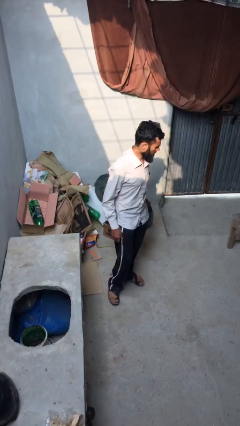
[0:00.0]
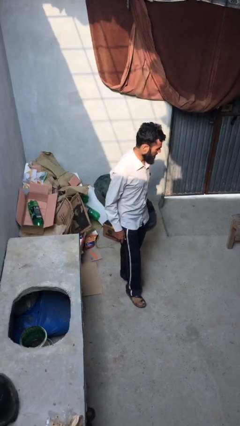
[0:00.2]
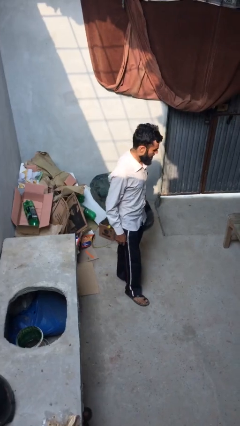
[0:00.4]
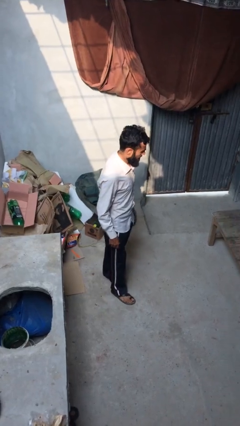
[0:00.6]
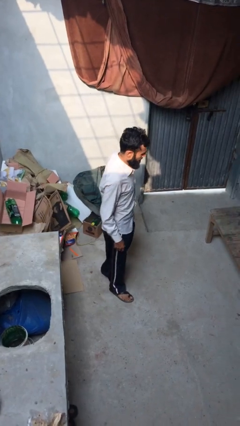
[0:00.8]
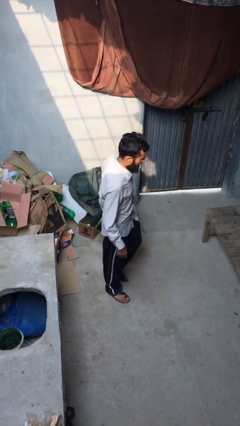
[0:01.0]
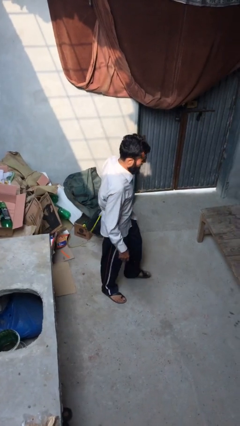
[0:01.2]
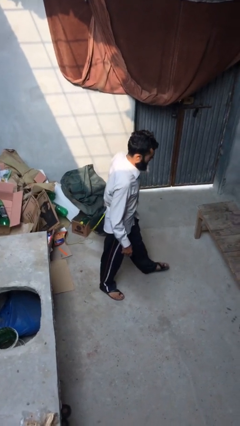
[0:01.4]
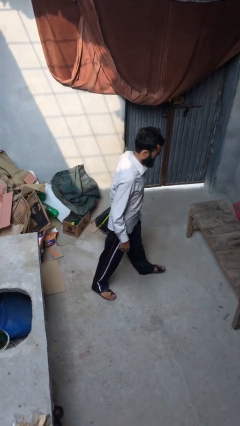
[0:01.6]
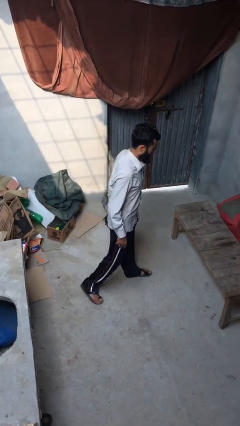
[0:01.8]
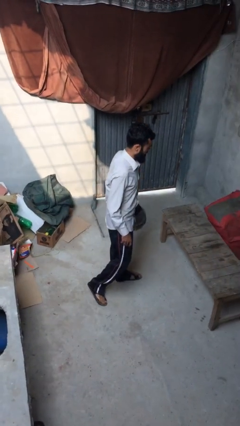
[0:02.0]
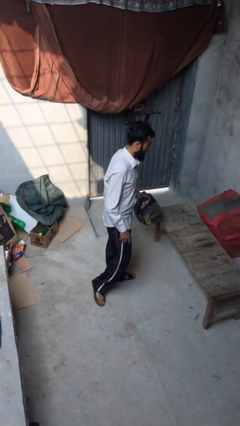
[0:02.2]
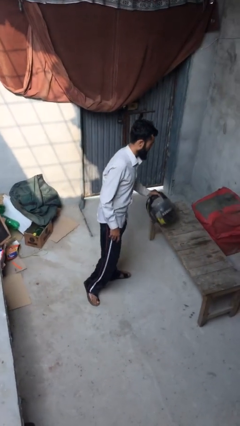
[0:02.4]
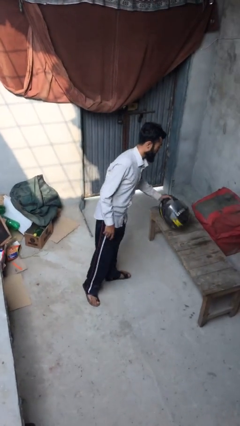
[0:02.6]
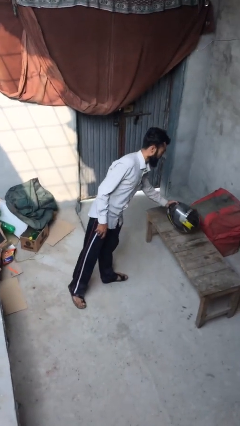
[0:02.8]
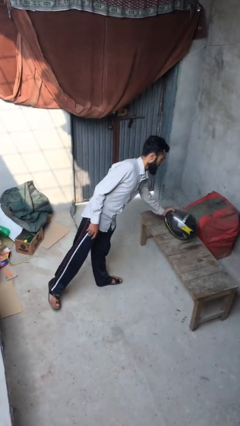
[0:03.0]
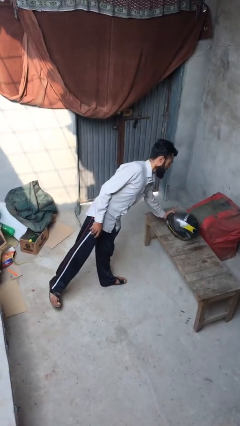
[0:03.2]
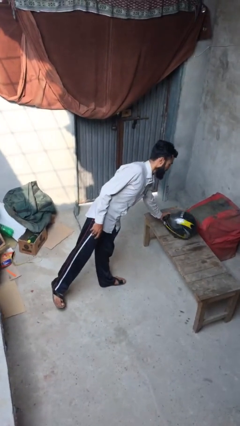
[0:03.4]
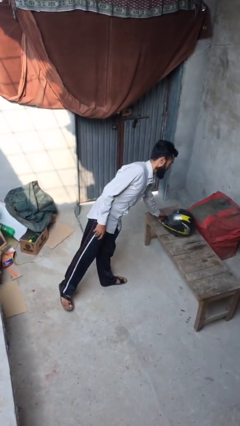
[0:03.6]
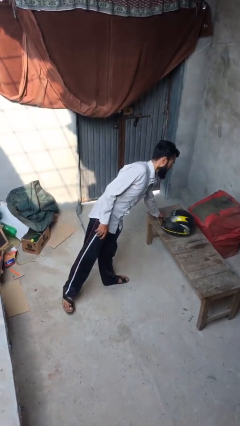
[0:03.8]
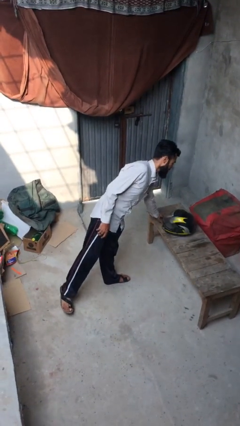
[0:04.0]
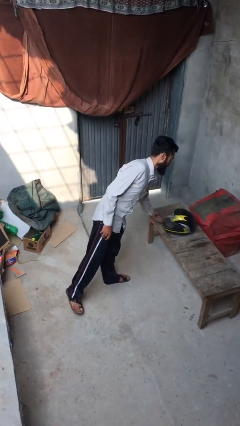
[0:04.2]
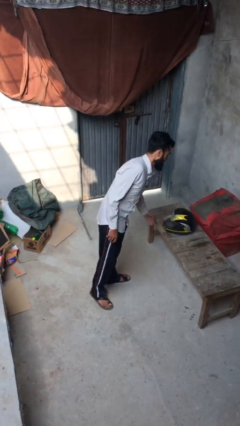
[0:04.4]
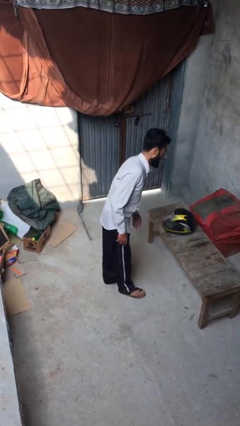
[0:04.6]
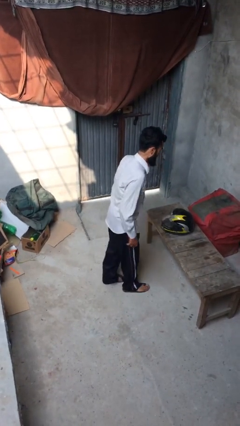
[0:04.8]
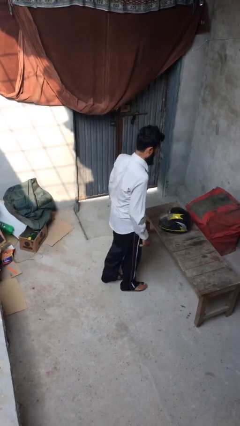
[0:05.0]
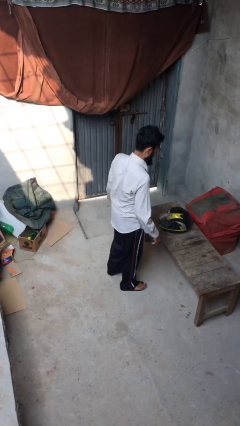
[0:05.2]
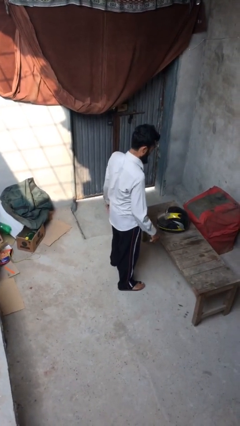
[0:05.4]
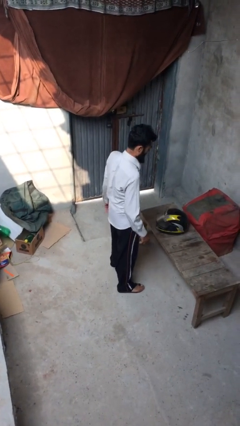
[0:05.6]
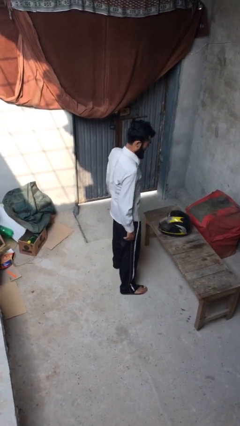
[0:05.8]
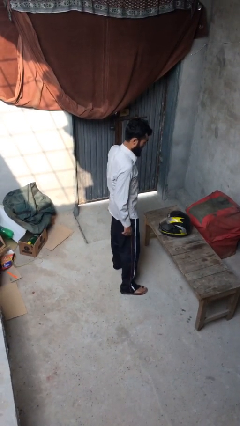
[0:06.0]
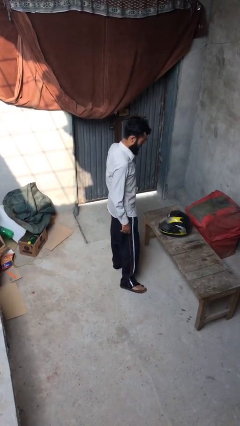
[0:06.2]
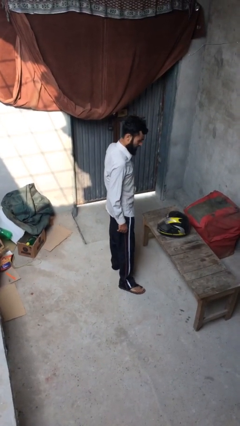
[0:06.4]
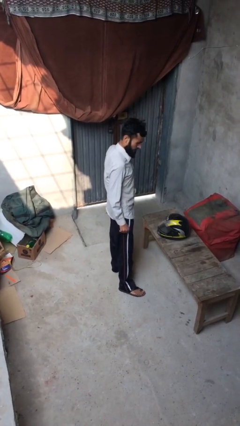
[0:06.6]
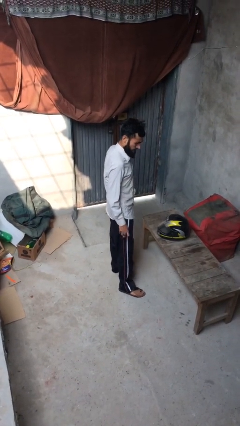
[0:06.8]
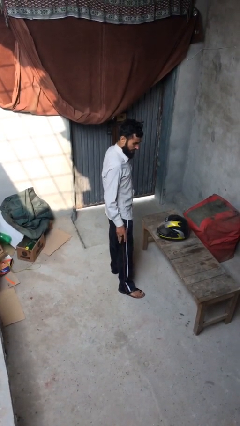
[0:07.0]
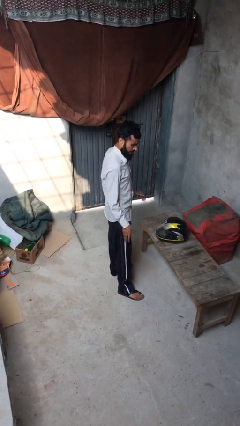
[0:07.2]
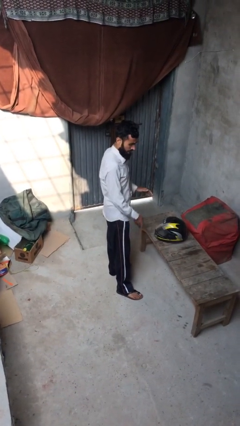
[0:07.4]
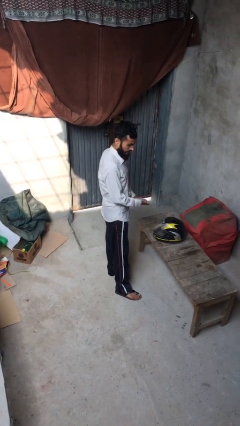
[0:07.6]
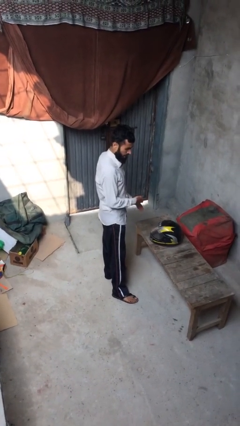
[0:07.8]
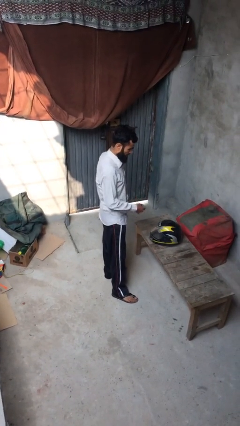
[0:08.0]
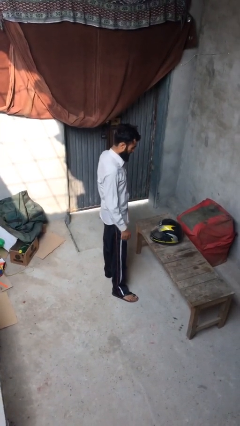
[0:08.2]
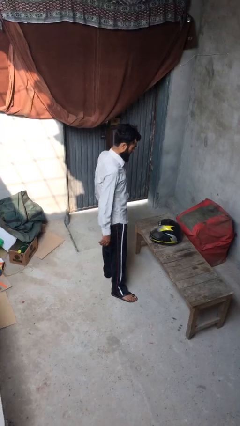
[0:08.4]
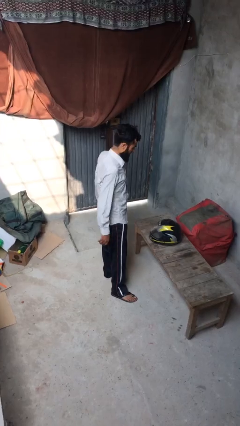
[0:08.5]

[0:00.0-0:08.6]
person puts down object on table

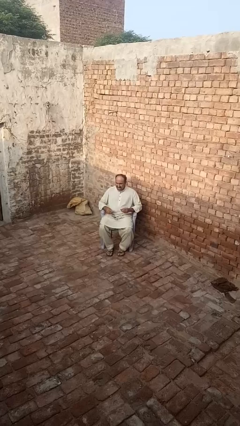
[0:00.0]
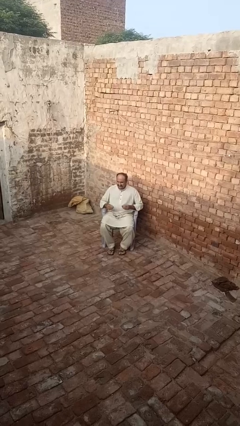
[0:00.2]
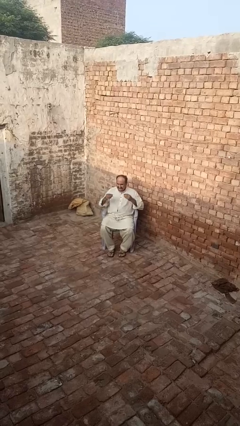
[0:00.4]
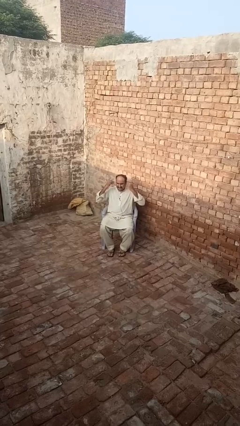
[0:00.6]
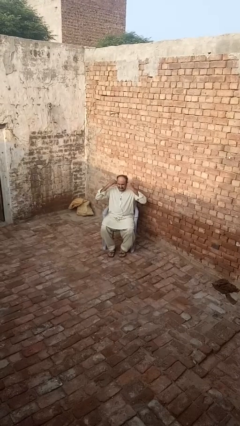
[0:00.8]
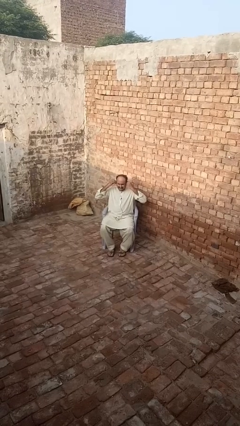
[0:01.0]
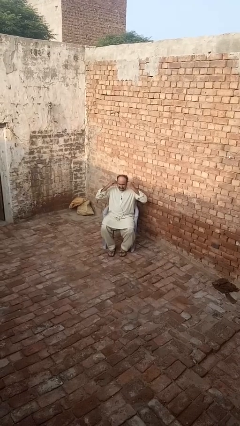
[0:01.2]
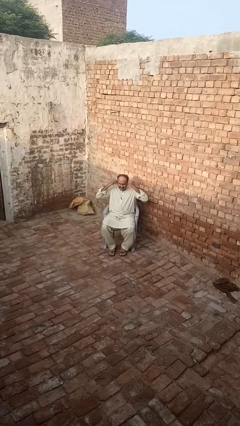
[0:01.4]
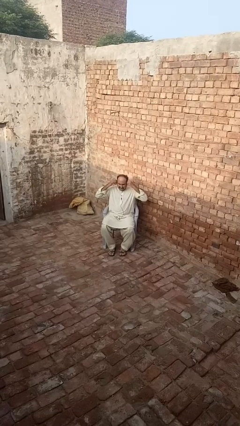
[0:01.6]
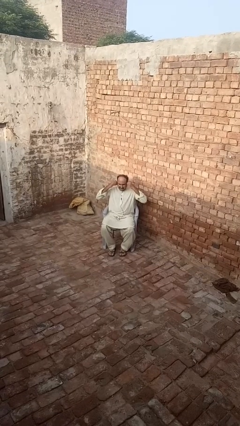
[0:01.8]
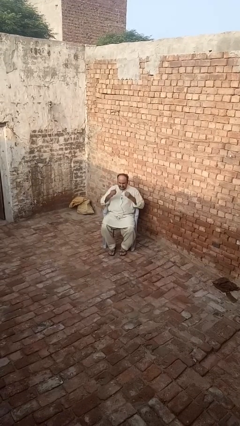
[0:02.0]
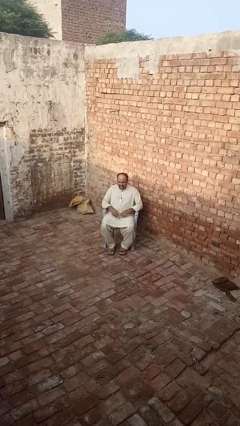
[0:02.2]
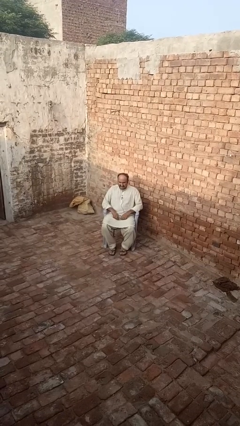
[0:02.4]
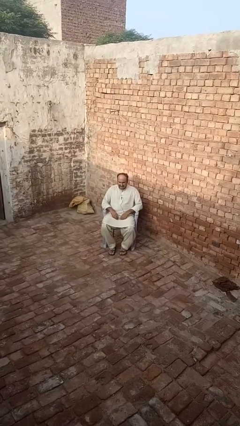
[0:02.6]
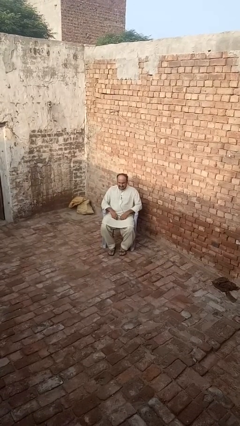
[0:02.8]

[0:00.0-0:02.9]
person puts on headphones

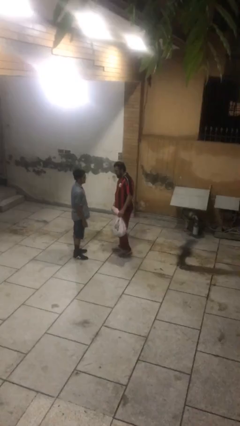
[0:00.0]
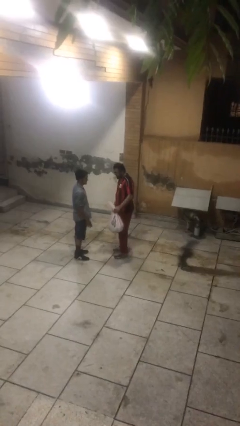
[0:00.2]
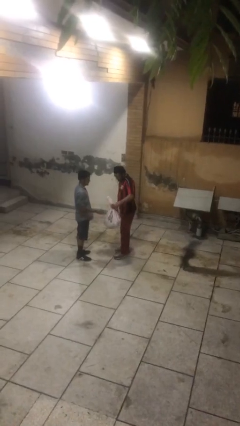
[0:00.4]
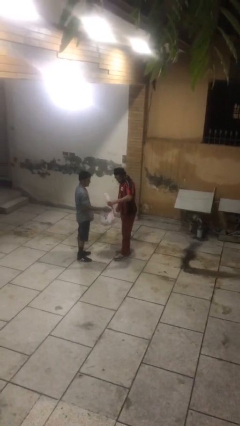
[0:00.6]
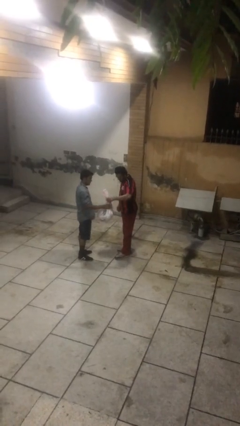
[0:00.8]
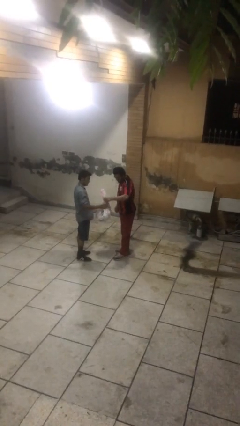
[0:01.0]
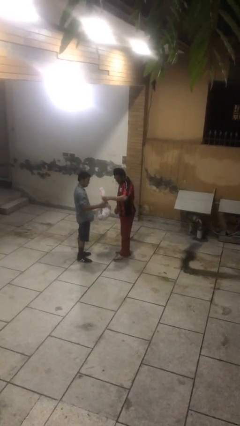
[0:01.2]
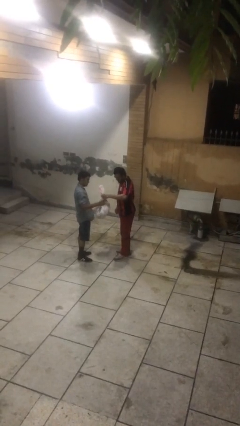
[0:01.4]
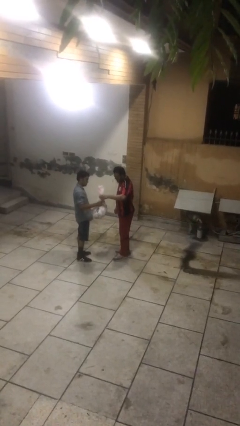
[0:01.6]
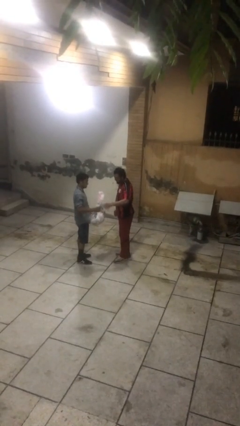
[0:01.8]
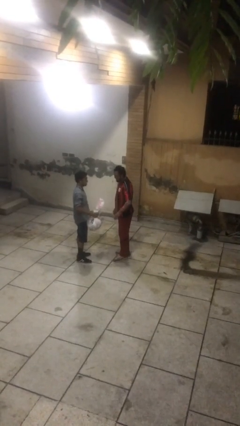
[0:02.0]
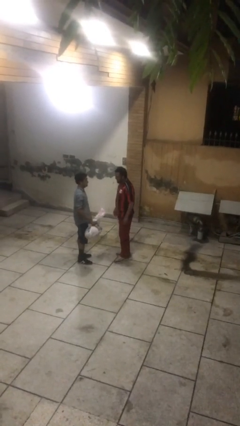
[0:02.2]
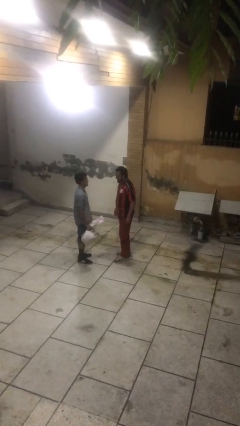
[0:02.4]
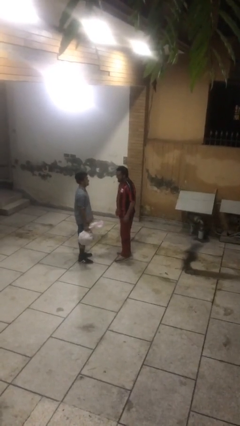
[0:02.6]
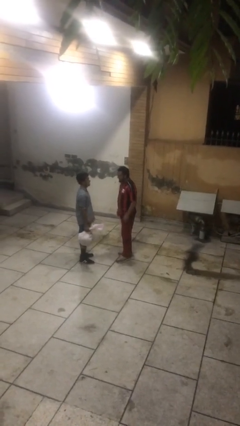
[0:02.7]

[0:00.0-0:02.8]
person transfers object to person

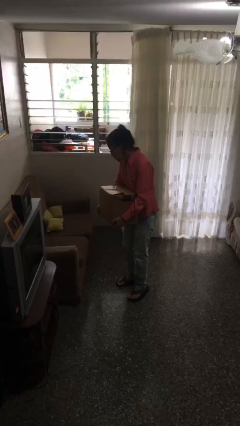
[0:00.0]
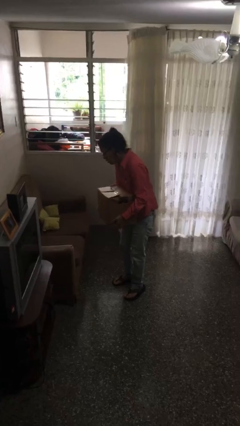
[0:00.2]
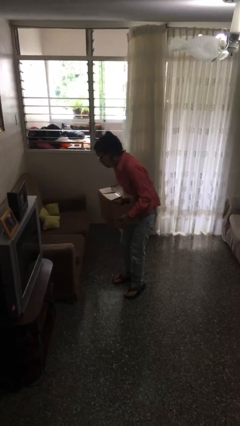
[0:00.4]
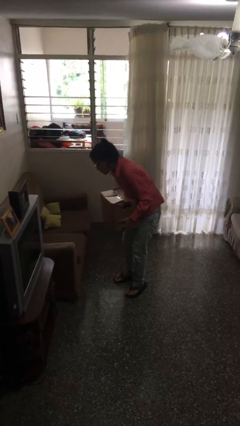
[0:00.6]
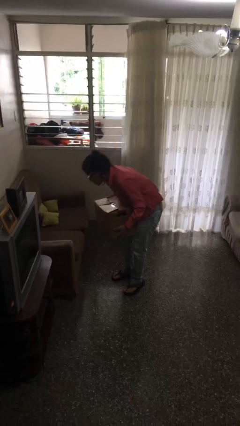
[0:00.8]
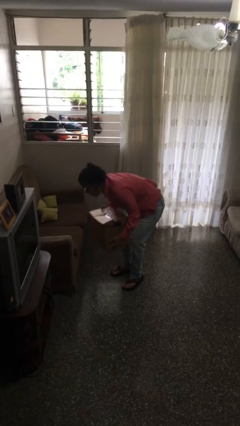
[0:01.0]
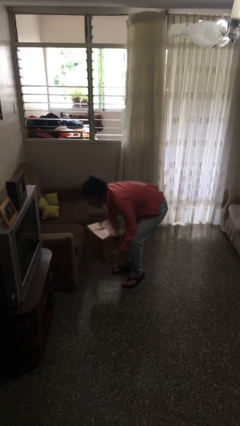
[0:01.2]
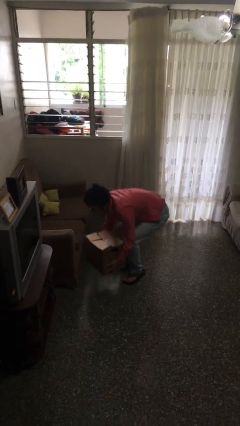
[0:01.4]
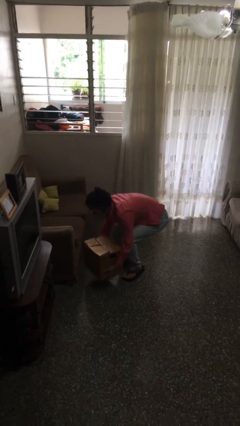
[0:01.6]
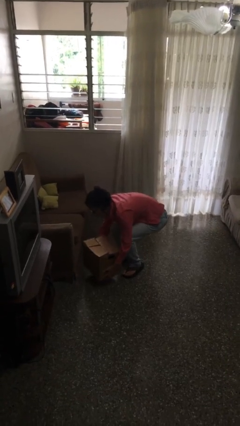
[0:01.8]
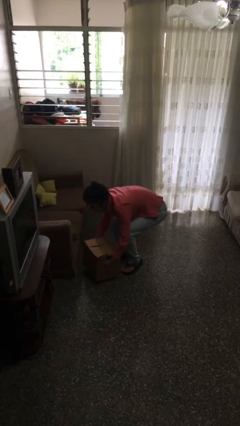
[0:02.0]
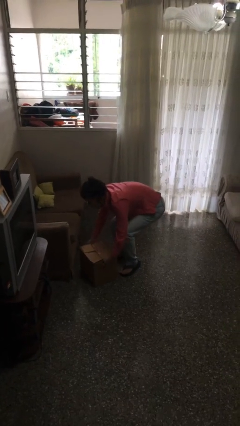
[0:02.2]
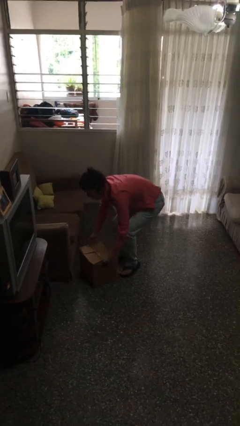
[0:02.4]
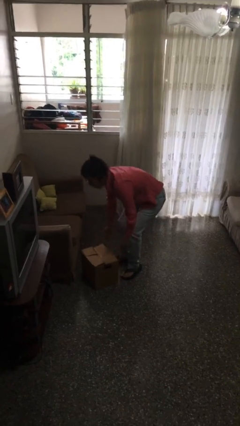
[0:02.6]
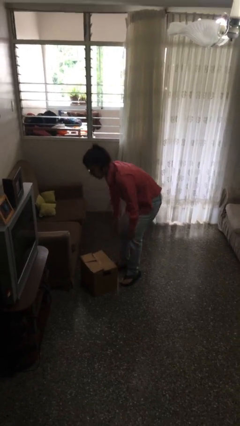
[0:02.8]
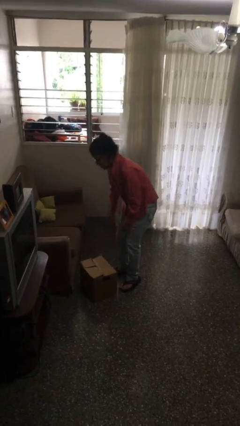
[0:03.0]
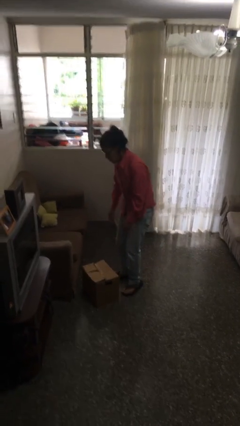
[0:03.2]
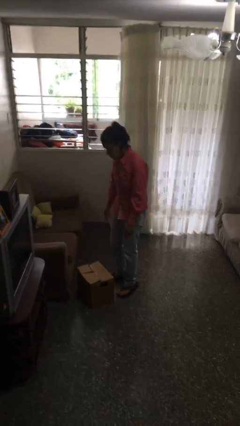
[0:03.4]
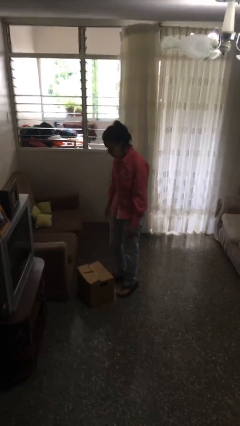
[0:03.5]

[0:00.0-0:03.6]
person puts down object on floor
